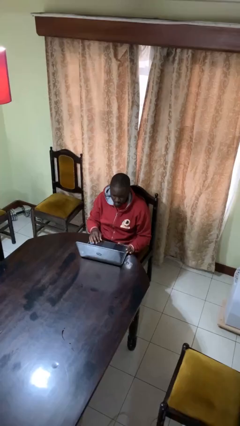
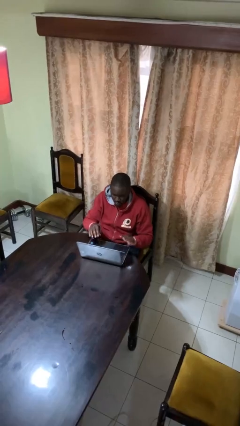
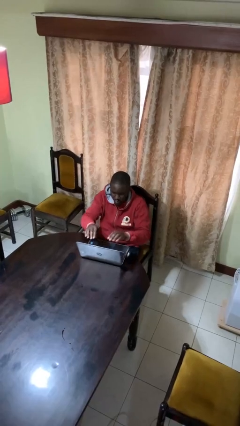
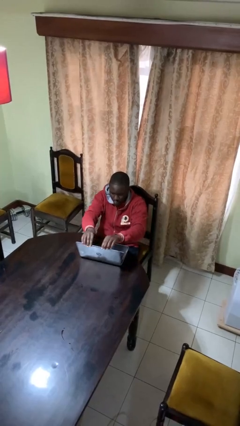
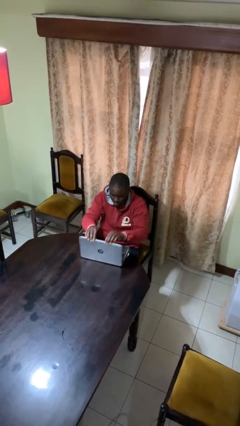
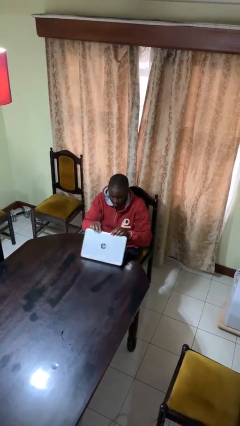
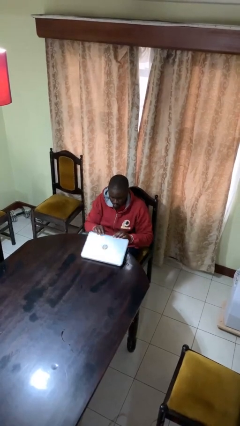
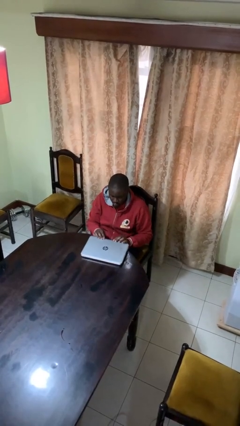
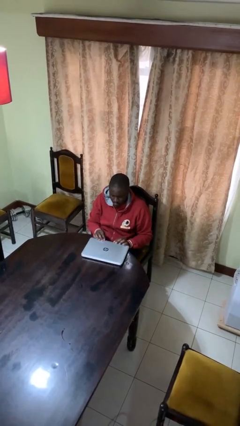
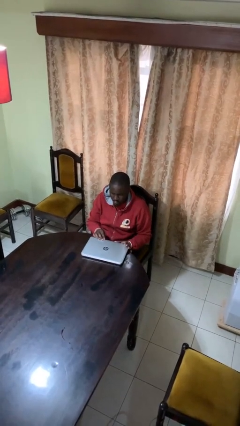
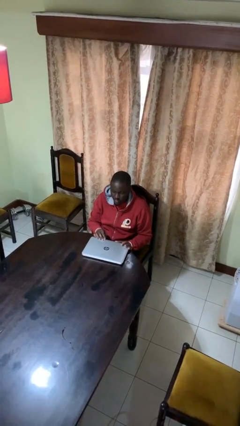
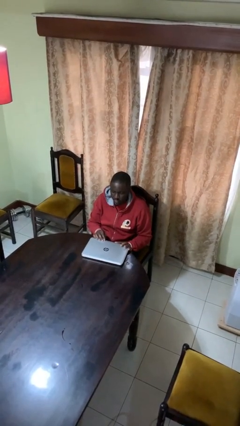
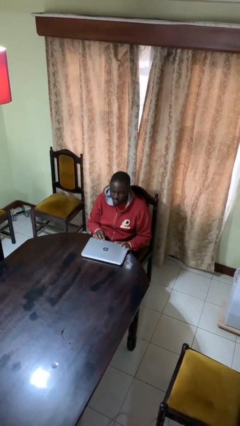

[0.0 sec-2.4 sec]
person closes laptop

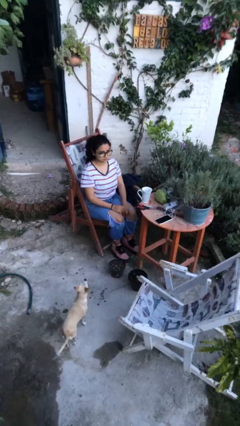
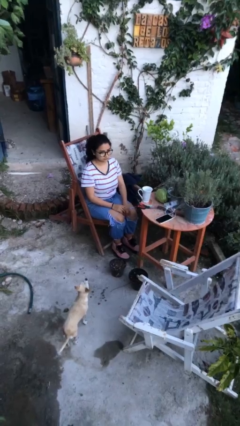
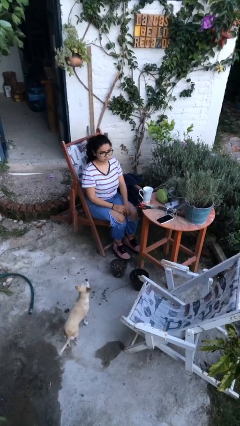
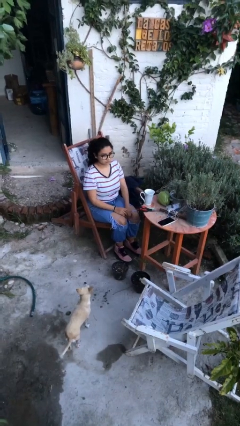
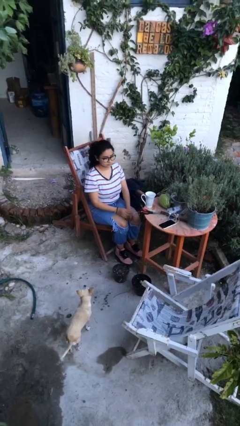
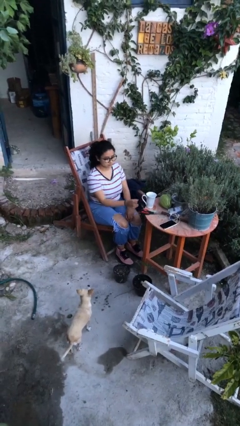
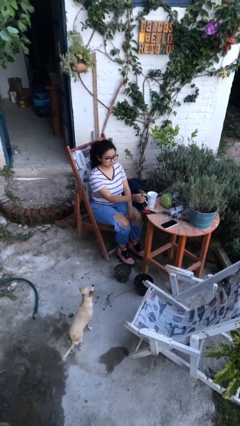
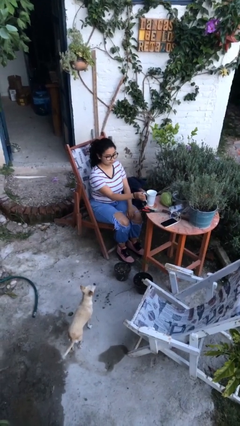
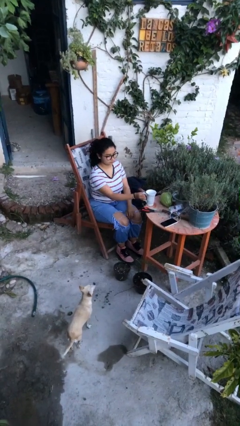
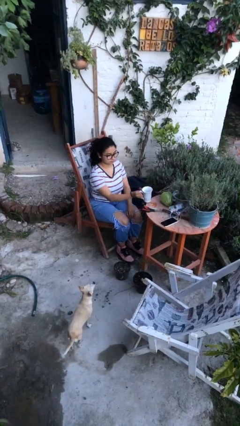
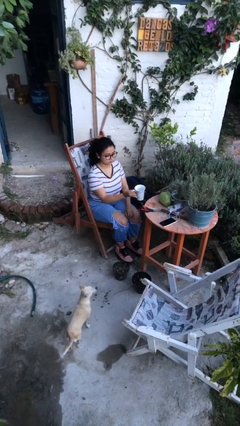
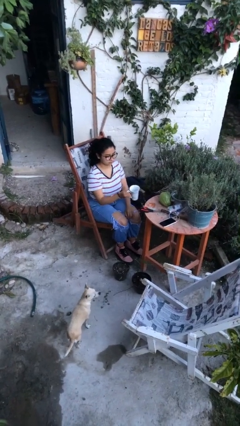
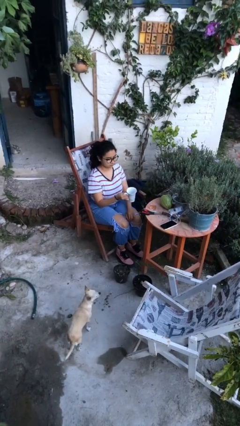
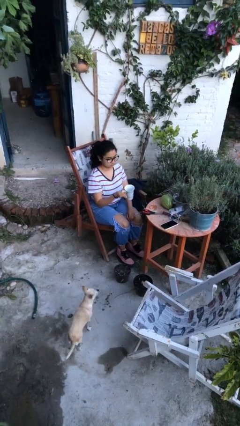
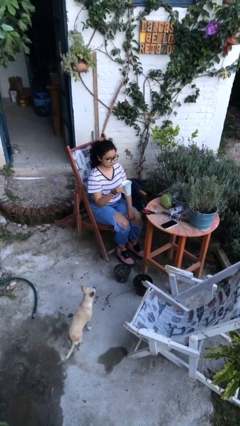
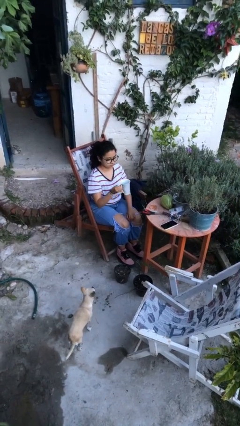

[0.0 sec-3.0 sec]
person picks up object from table

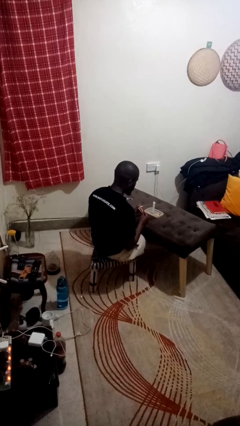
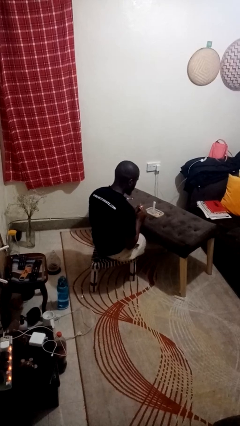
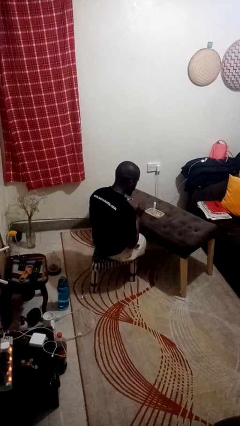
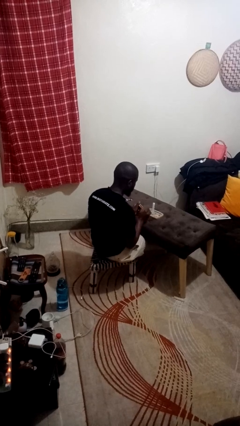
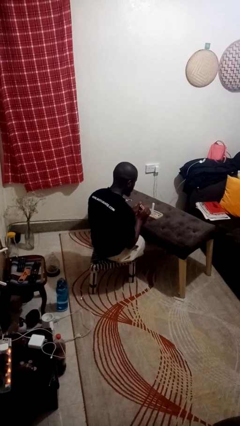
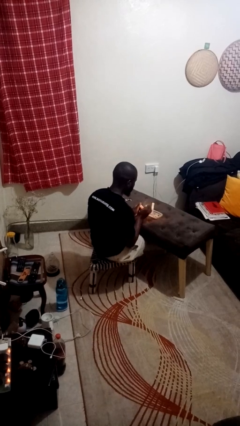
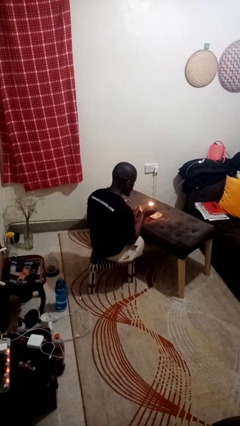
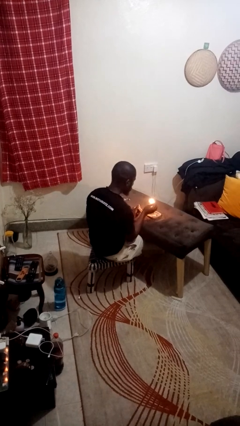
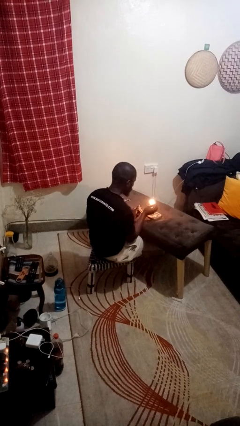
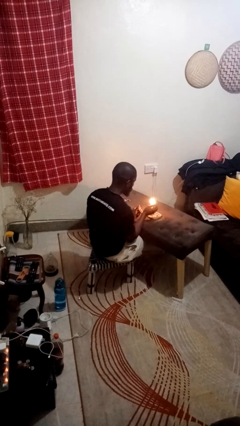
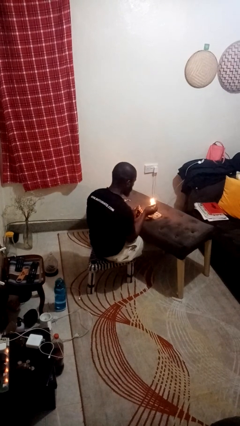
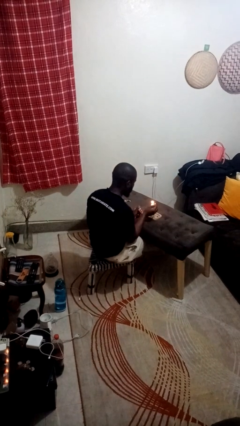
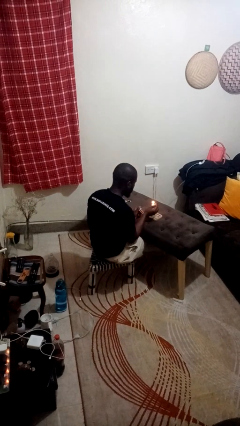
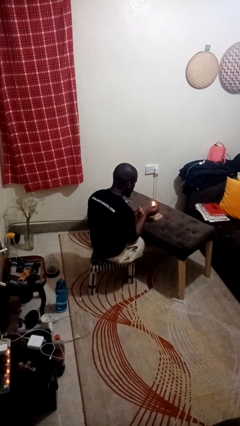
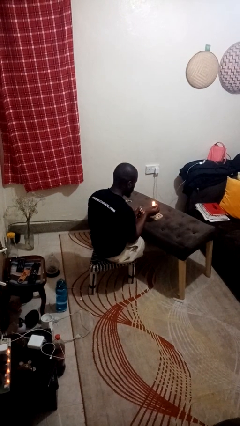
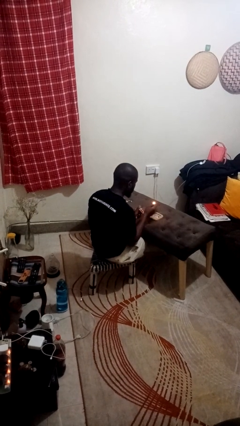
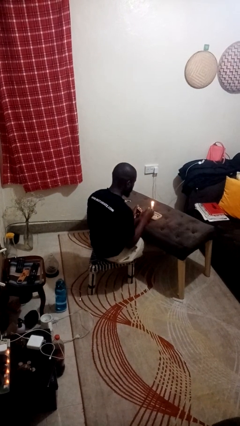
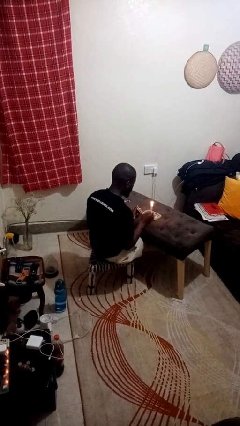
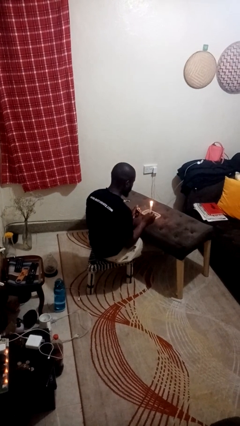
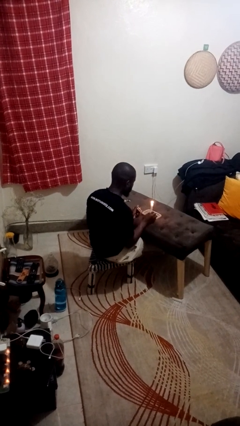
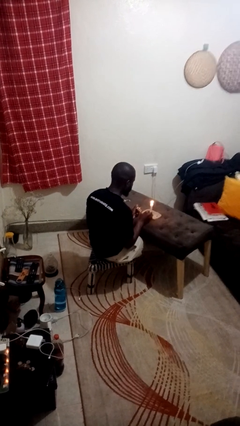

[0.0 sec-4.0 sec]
person lights candle

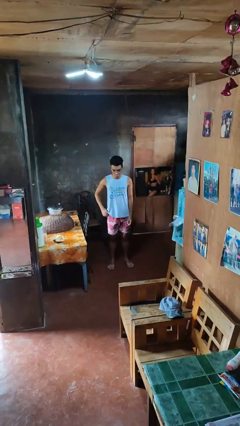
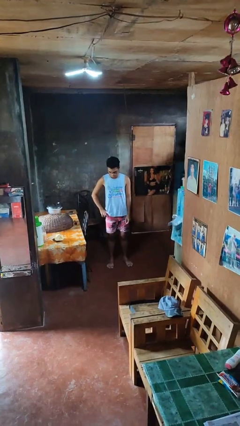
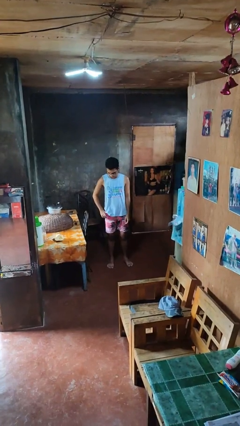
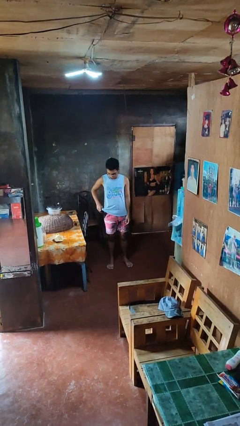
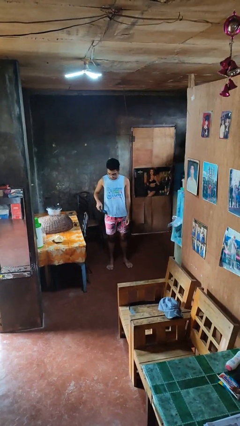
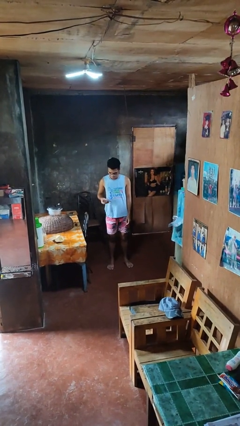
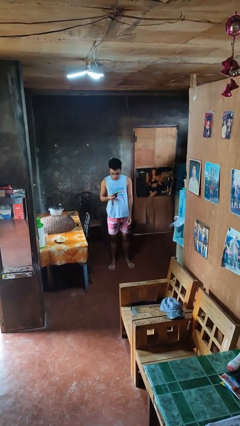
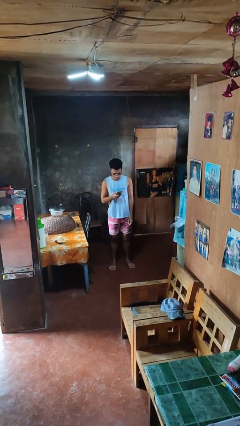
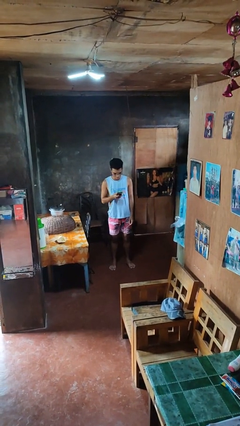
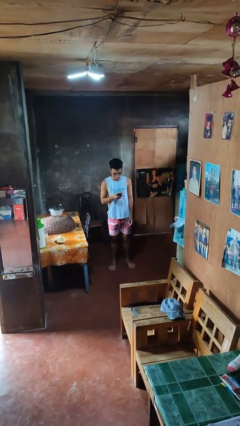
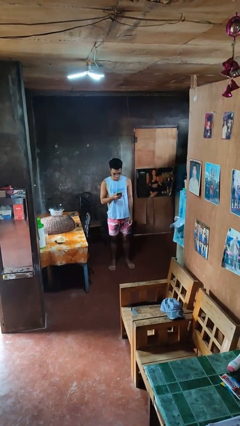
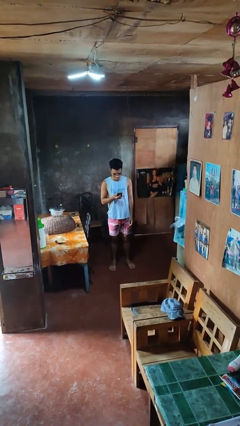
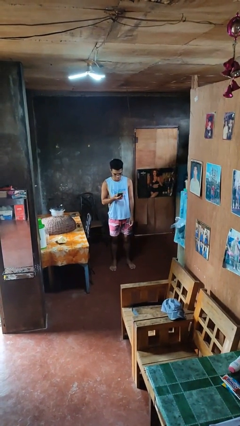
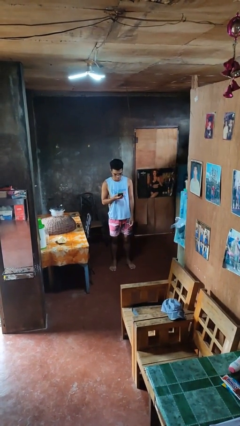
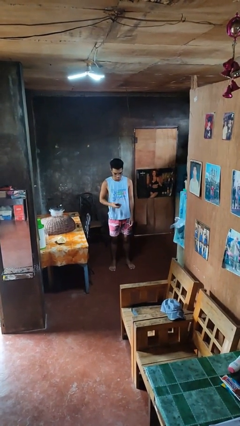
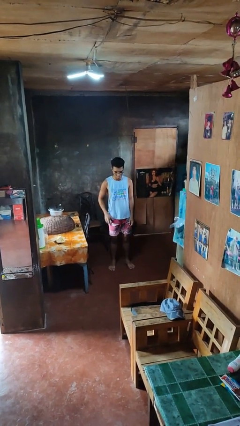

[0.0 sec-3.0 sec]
person takes phone from pocket

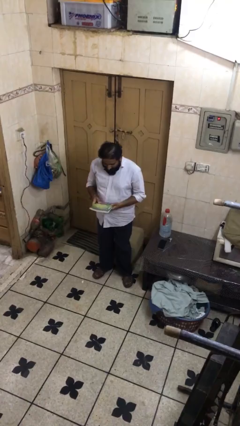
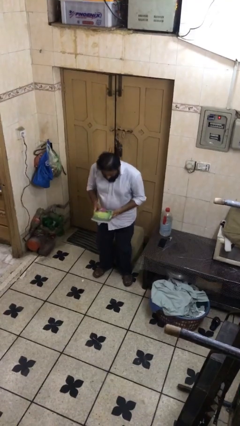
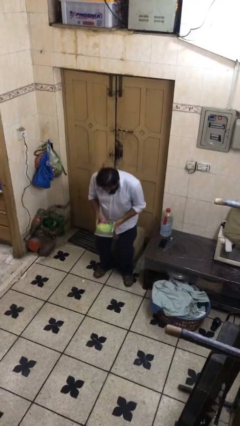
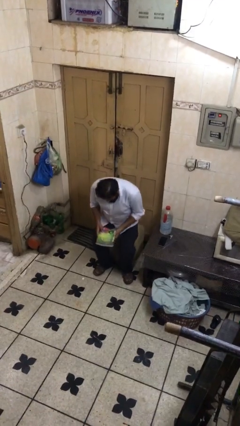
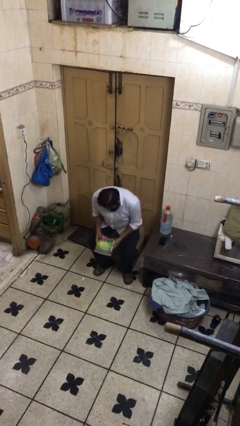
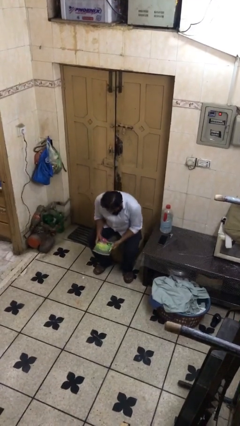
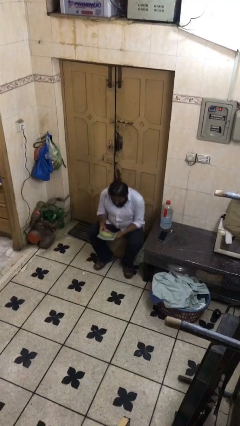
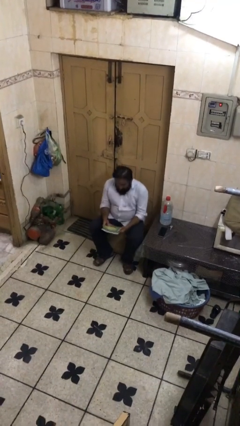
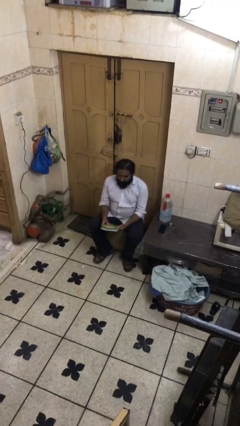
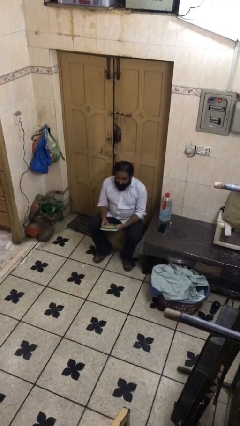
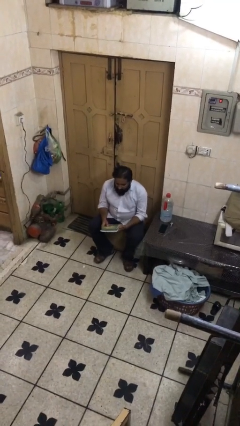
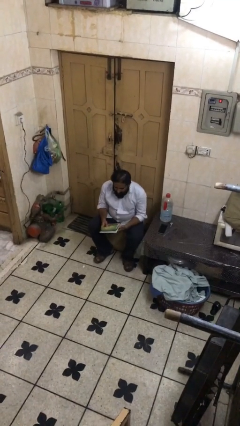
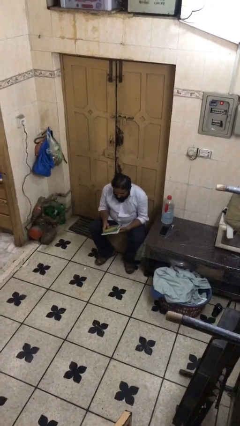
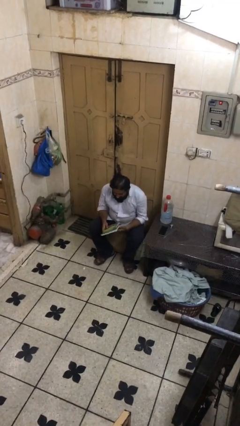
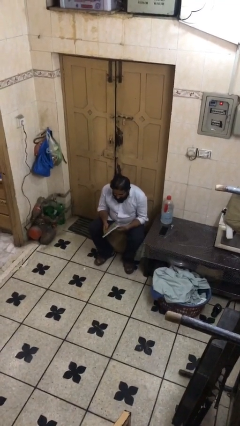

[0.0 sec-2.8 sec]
person sits down

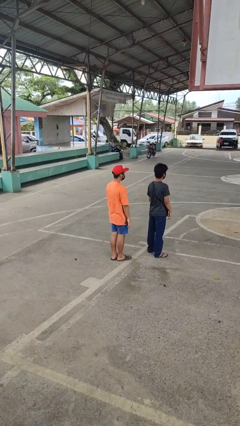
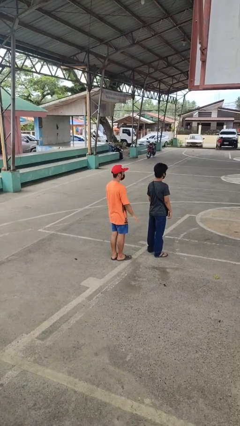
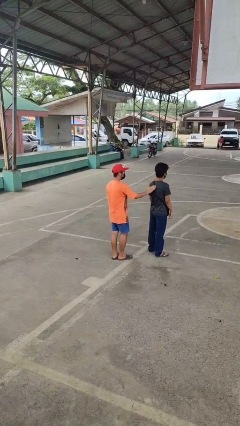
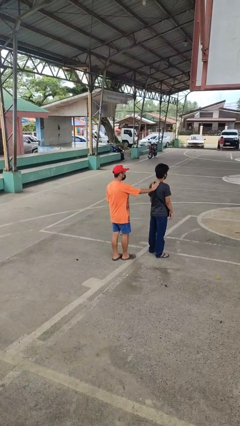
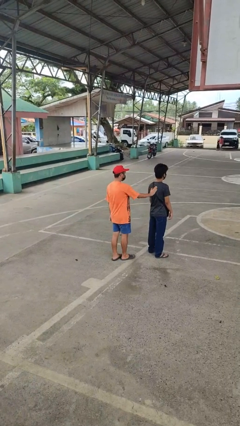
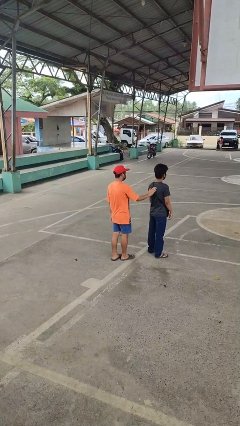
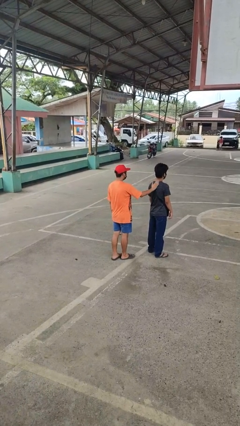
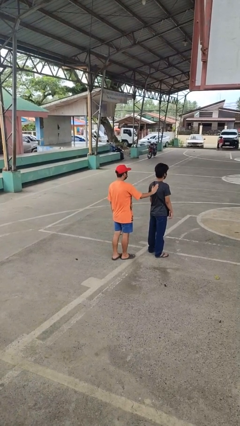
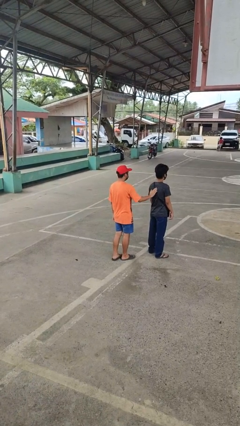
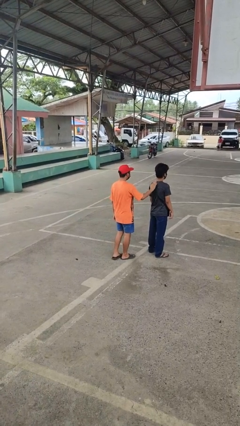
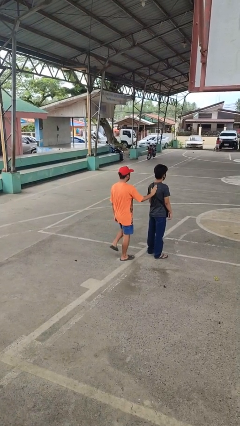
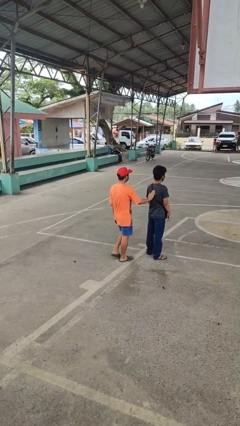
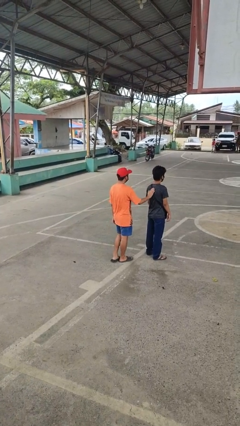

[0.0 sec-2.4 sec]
person touches back of person
